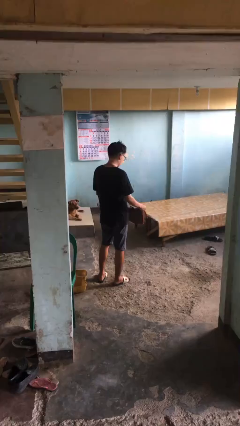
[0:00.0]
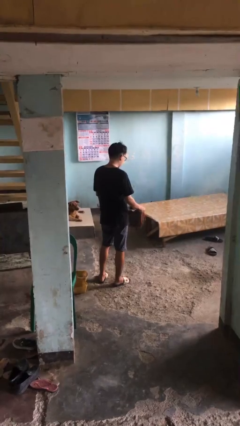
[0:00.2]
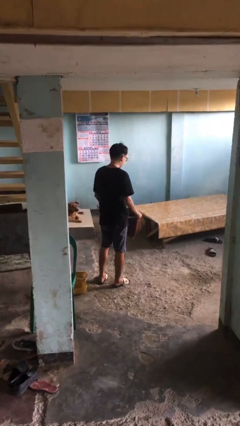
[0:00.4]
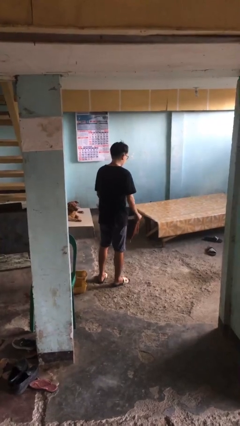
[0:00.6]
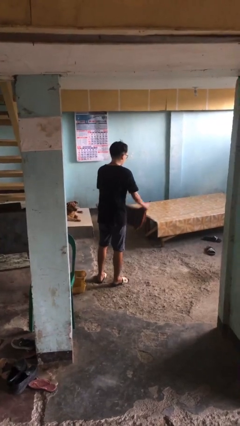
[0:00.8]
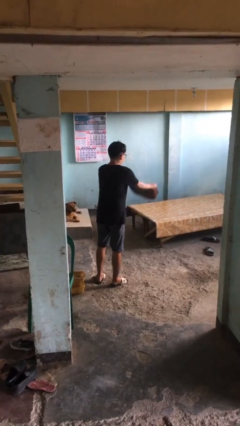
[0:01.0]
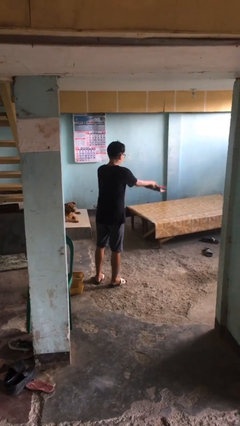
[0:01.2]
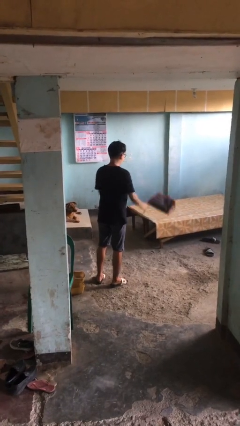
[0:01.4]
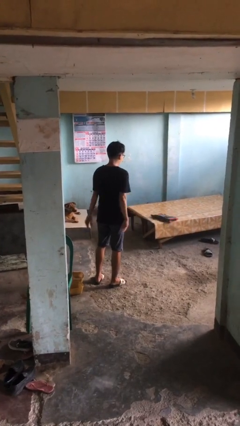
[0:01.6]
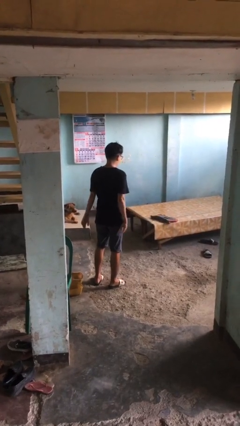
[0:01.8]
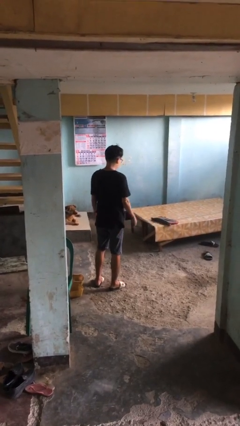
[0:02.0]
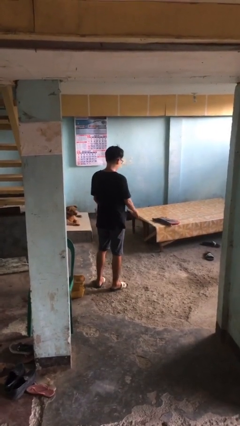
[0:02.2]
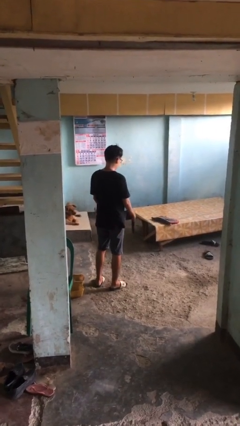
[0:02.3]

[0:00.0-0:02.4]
person throws object on bed

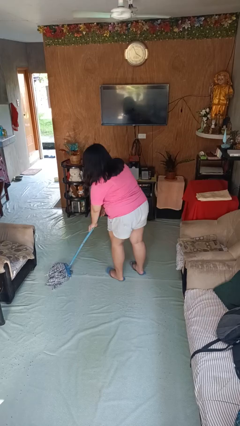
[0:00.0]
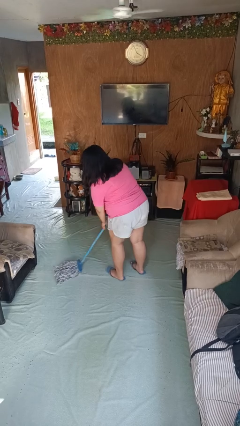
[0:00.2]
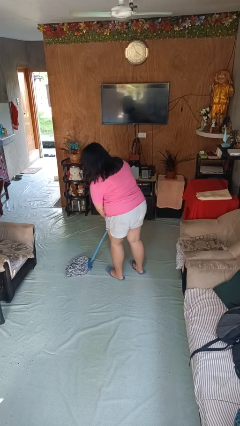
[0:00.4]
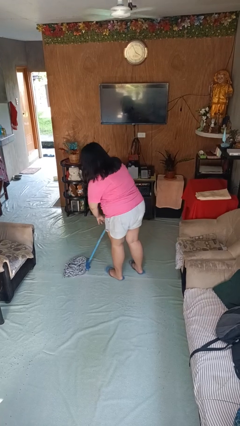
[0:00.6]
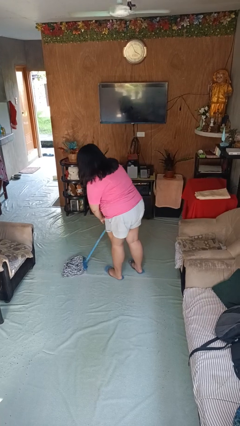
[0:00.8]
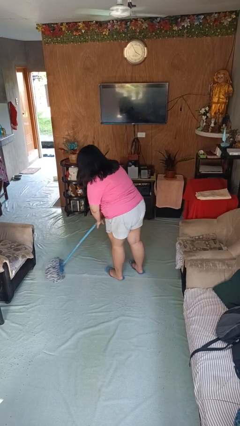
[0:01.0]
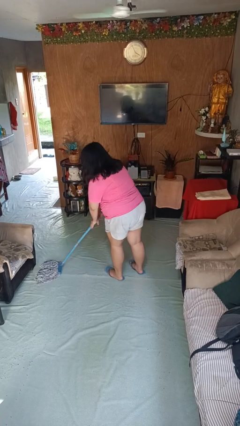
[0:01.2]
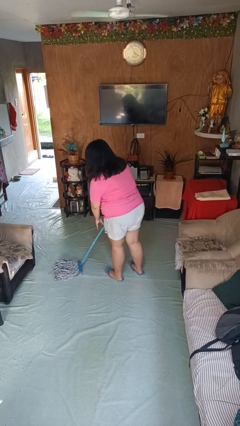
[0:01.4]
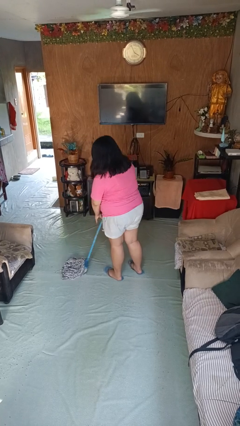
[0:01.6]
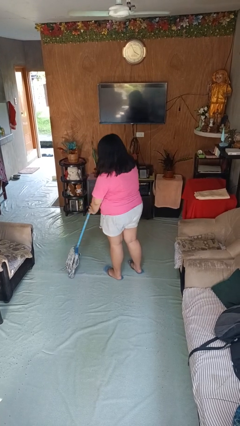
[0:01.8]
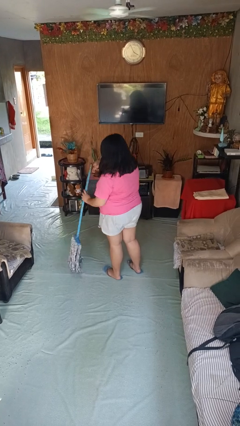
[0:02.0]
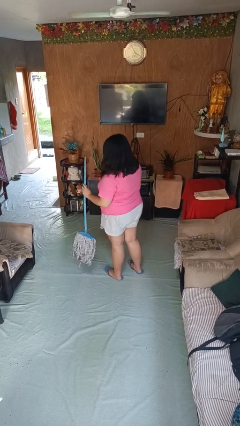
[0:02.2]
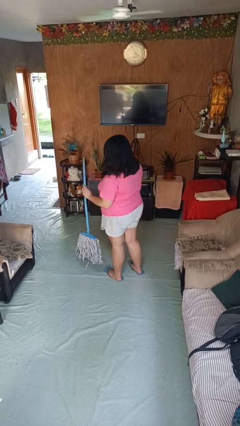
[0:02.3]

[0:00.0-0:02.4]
person mops

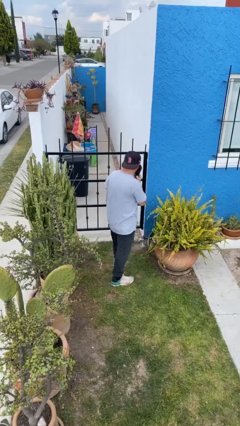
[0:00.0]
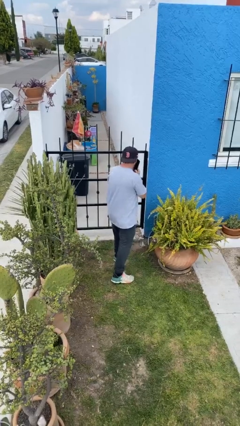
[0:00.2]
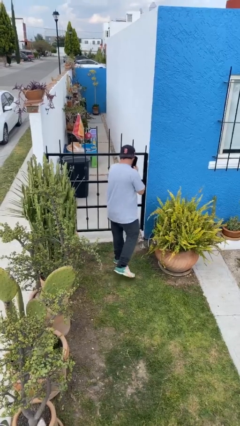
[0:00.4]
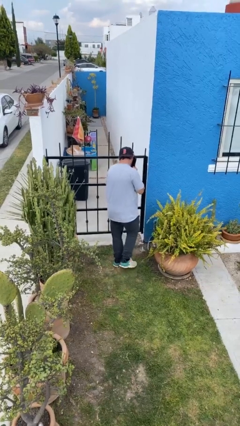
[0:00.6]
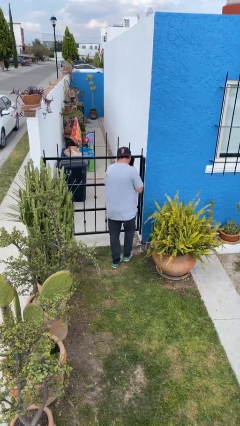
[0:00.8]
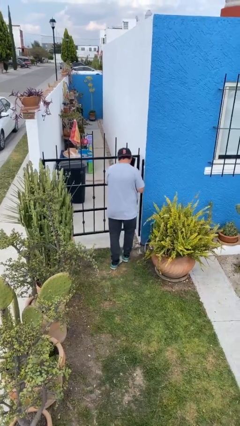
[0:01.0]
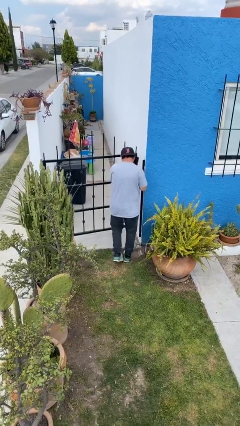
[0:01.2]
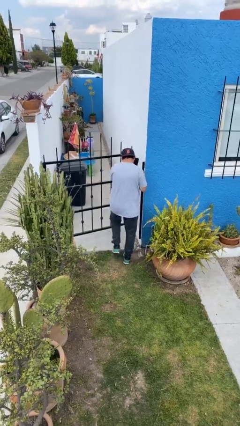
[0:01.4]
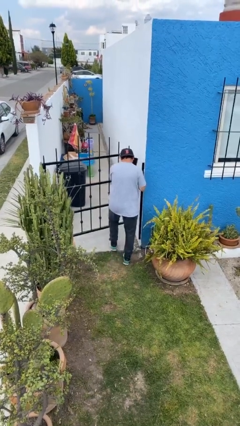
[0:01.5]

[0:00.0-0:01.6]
person opens facility door

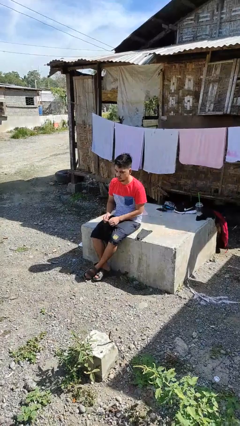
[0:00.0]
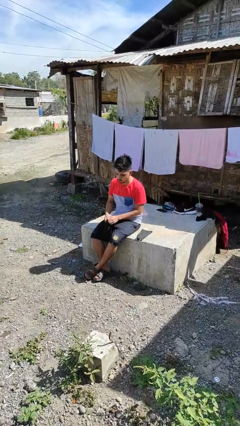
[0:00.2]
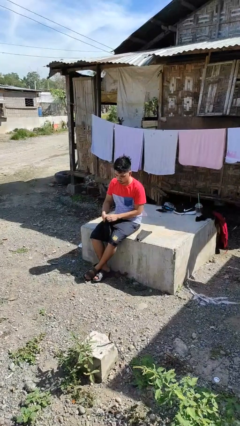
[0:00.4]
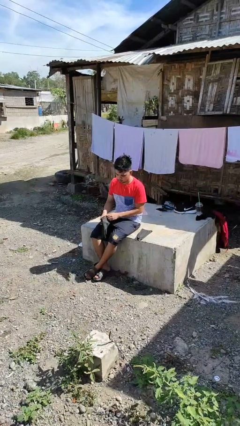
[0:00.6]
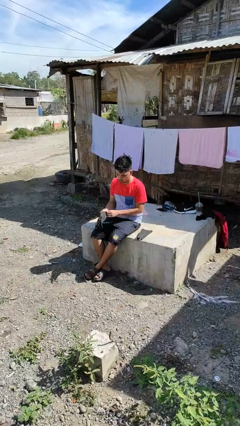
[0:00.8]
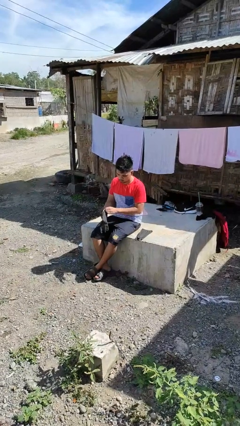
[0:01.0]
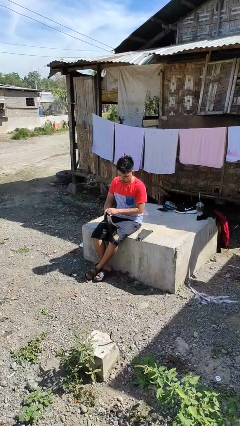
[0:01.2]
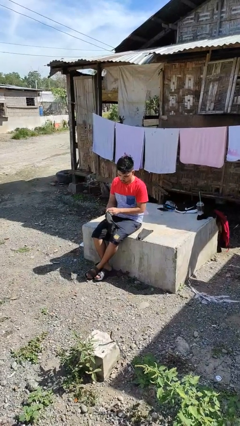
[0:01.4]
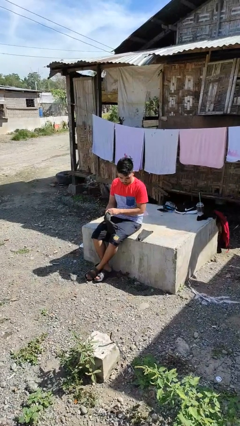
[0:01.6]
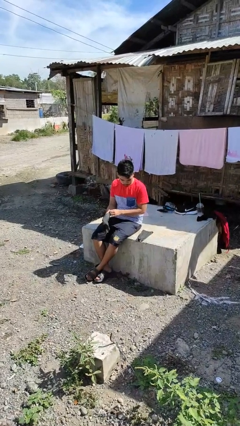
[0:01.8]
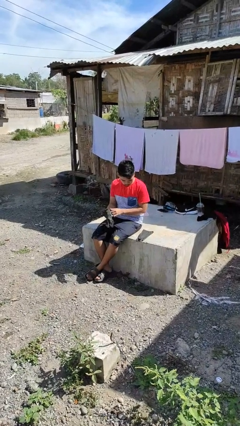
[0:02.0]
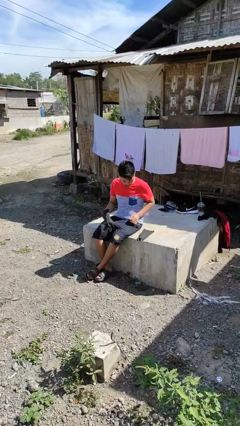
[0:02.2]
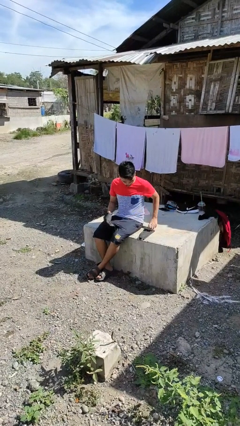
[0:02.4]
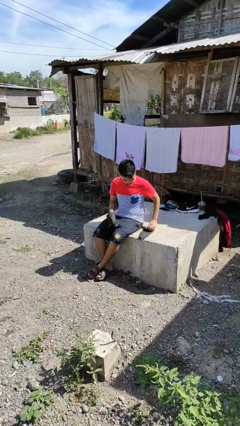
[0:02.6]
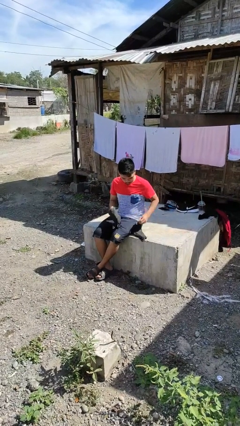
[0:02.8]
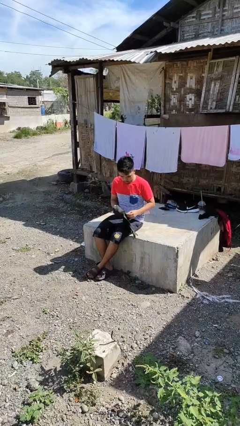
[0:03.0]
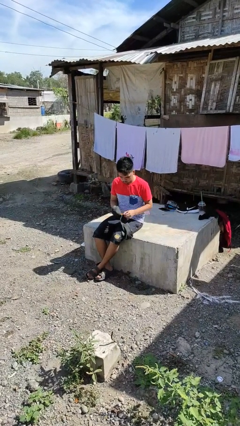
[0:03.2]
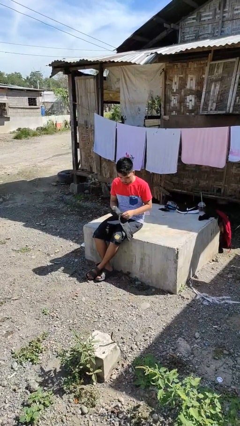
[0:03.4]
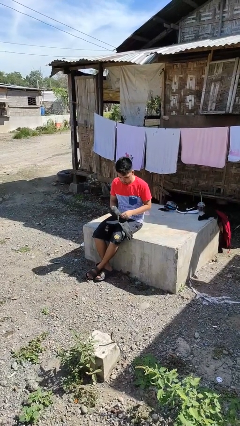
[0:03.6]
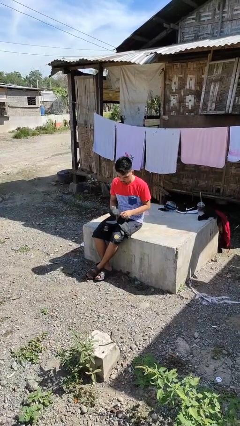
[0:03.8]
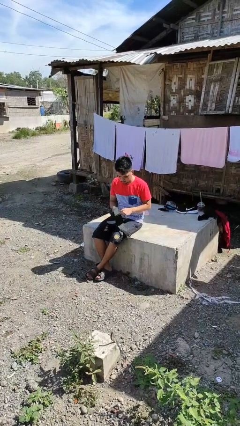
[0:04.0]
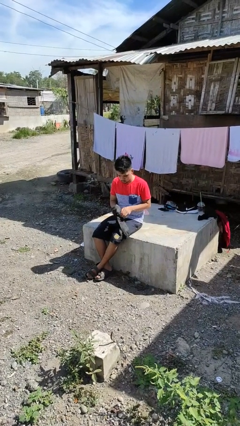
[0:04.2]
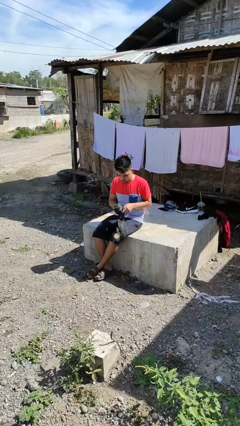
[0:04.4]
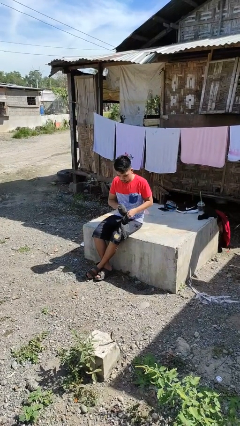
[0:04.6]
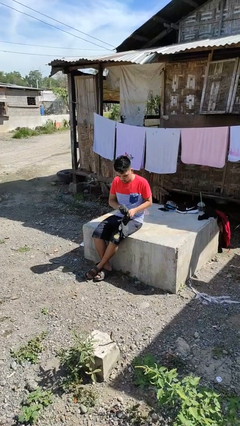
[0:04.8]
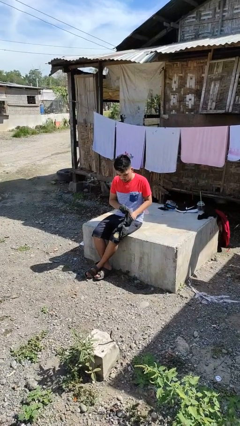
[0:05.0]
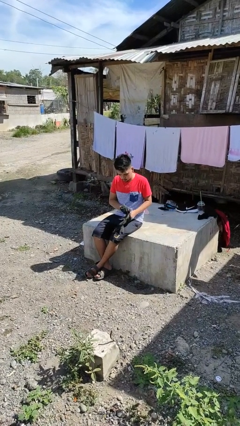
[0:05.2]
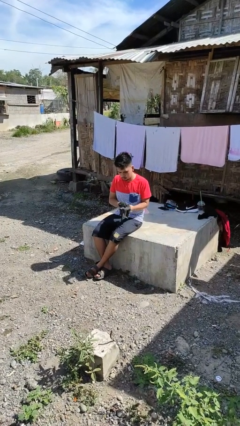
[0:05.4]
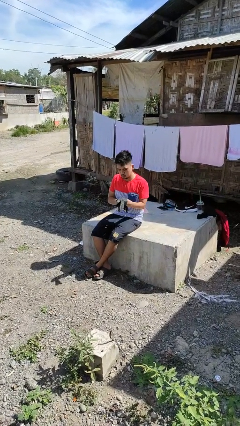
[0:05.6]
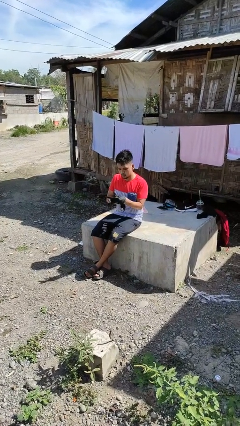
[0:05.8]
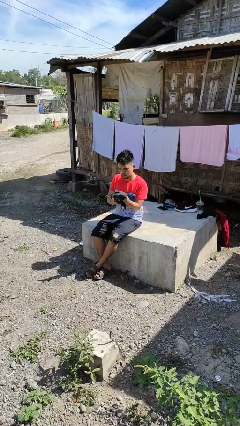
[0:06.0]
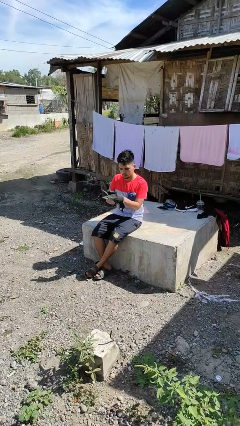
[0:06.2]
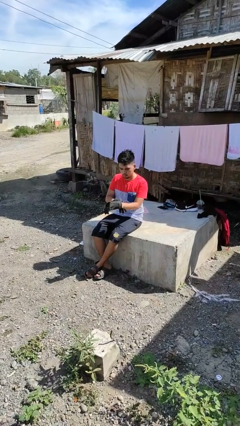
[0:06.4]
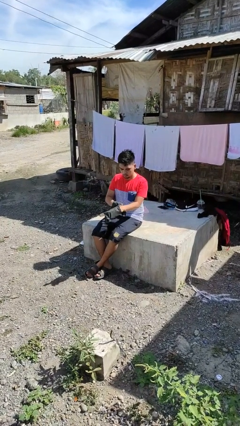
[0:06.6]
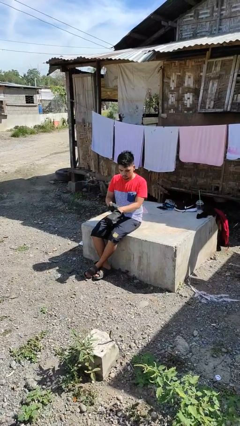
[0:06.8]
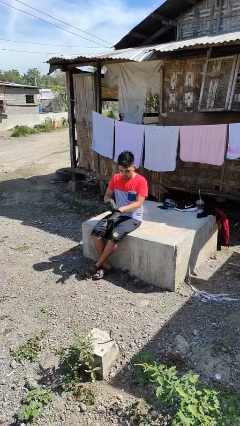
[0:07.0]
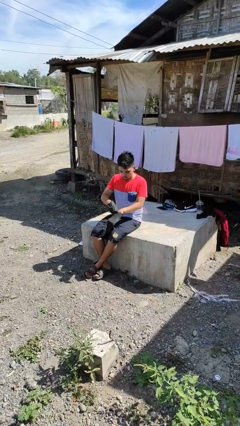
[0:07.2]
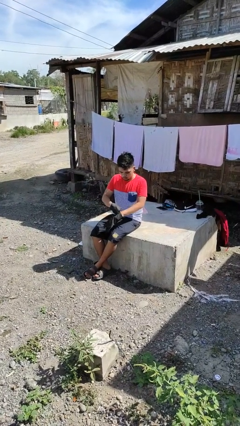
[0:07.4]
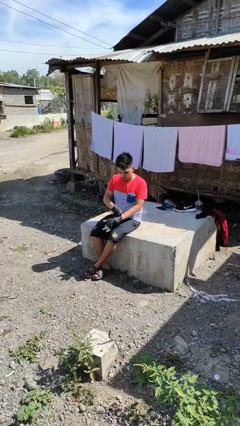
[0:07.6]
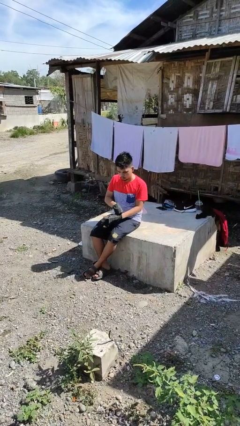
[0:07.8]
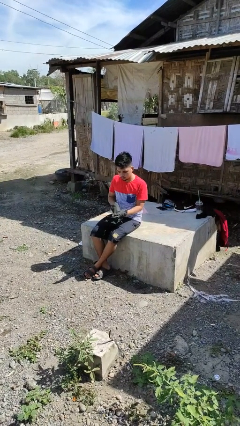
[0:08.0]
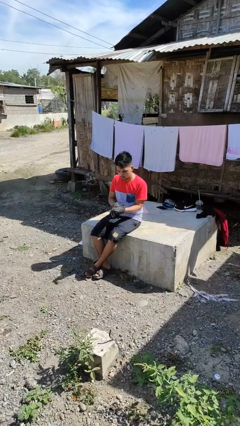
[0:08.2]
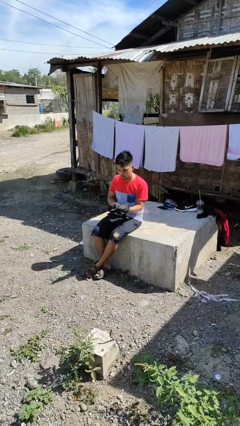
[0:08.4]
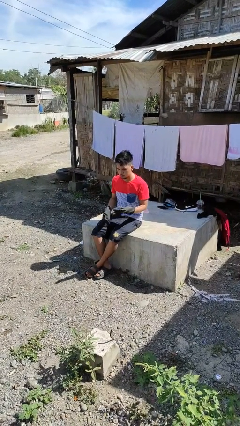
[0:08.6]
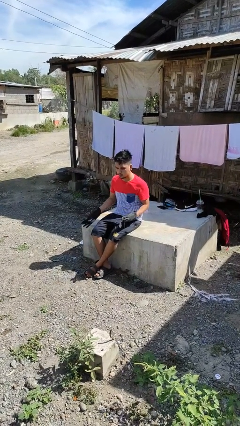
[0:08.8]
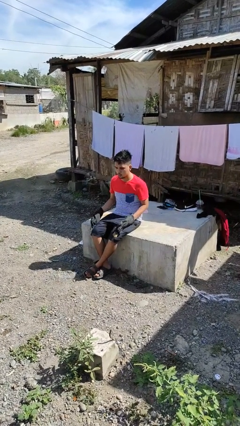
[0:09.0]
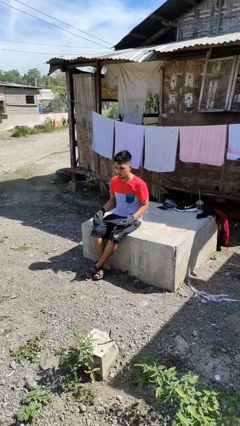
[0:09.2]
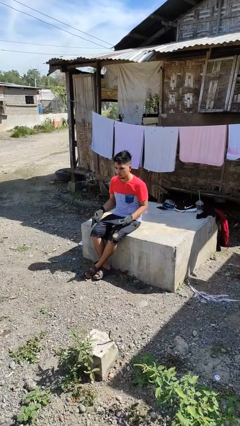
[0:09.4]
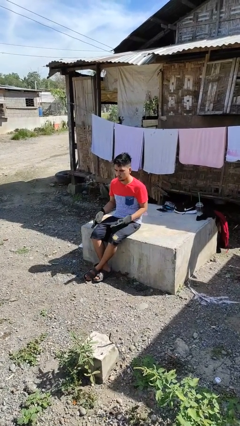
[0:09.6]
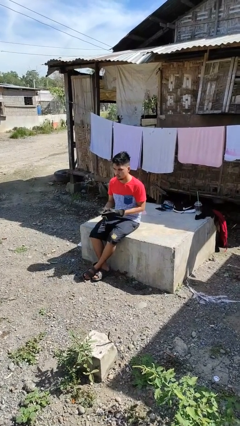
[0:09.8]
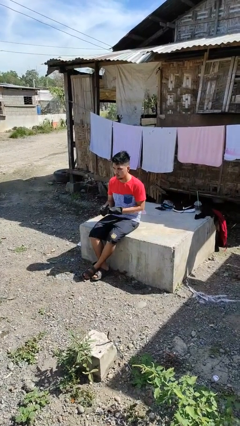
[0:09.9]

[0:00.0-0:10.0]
person puts on gloves

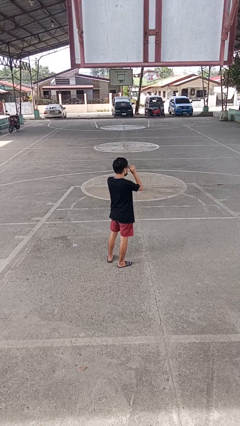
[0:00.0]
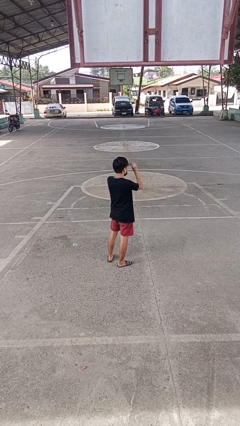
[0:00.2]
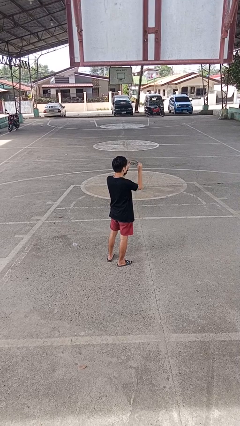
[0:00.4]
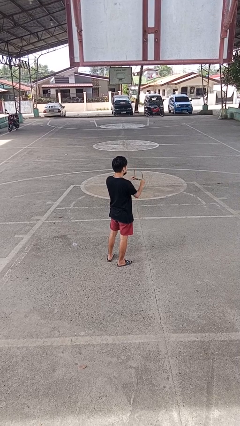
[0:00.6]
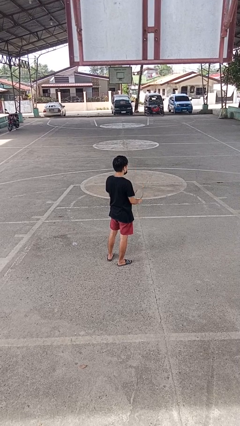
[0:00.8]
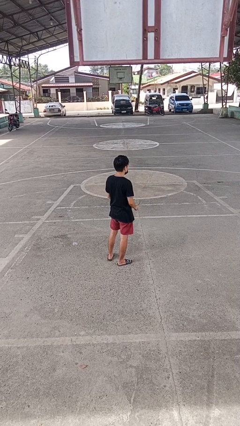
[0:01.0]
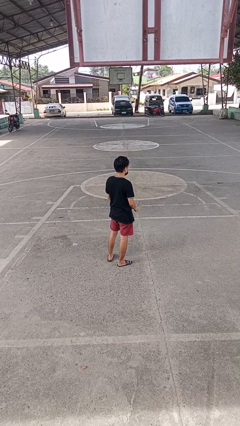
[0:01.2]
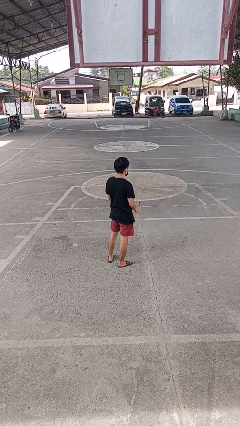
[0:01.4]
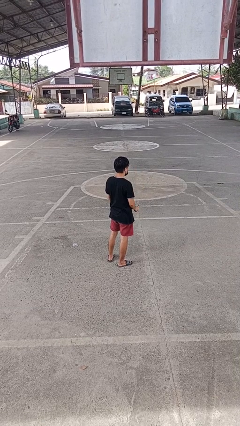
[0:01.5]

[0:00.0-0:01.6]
person takes off glasses
